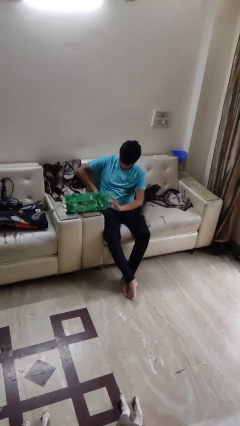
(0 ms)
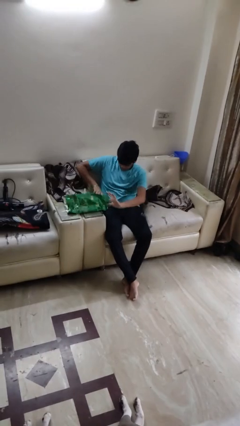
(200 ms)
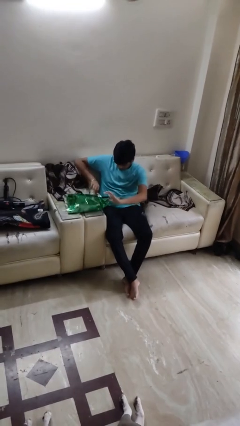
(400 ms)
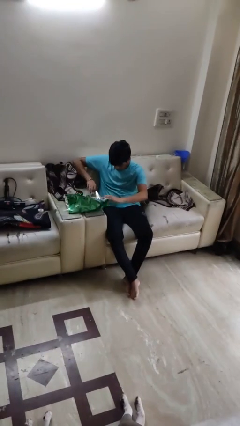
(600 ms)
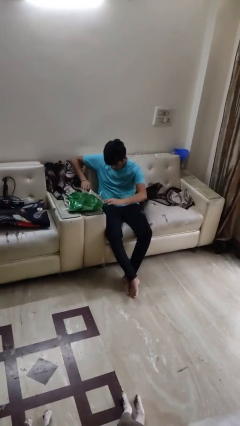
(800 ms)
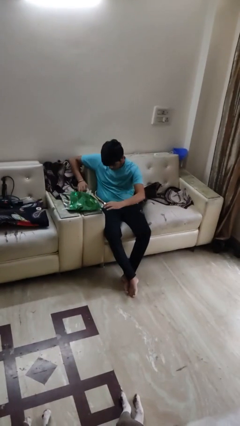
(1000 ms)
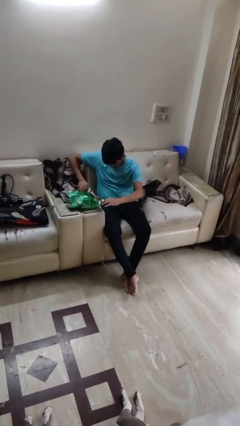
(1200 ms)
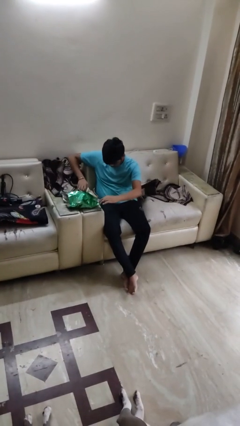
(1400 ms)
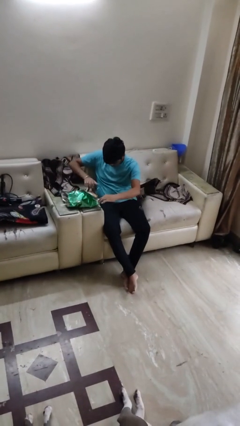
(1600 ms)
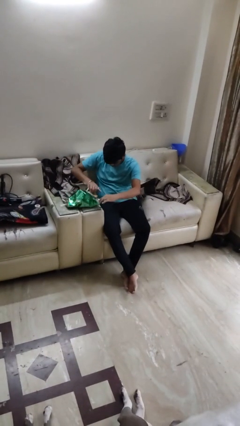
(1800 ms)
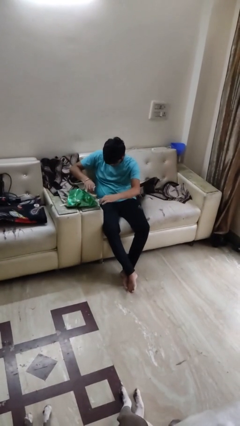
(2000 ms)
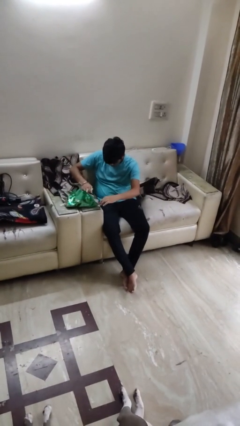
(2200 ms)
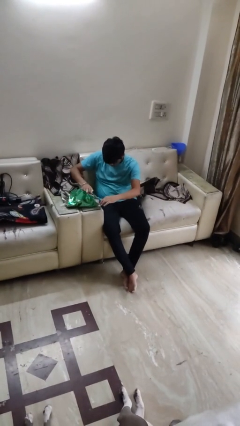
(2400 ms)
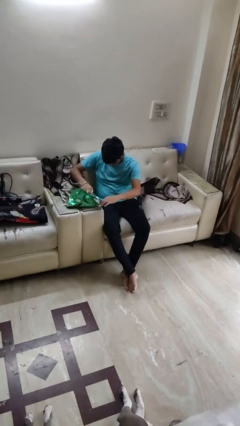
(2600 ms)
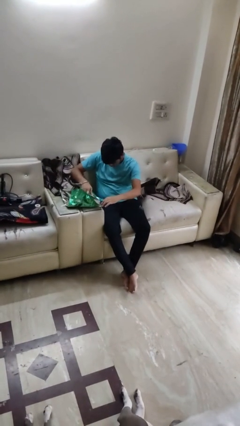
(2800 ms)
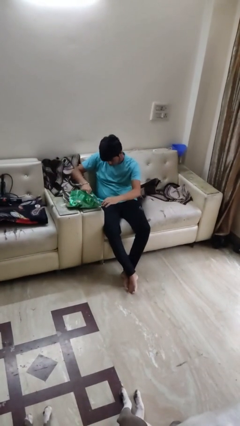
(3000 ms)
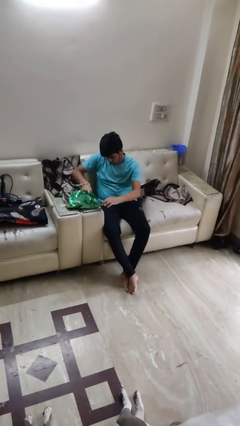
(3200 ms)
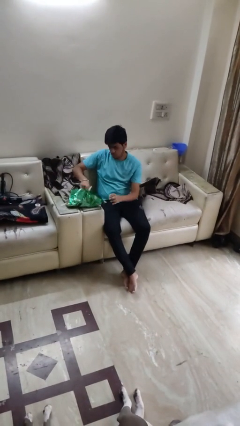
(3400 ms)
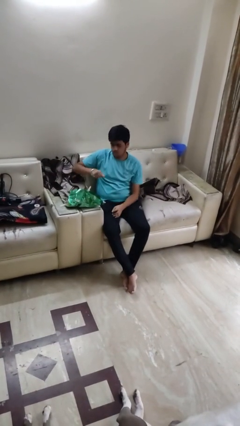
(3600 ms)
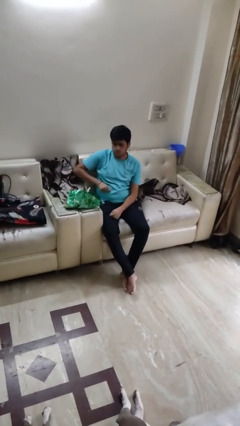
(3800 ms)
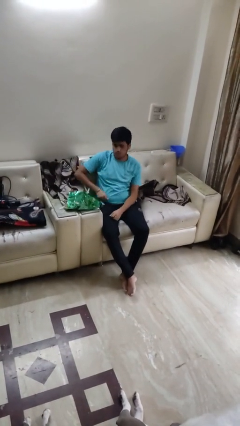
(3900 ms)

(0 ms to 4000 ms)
person wraps box

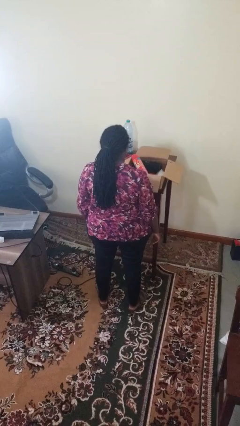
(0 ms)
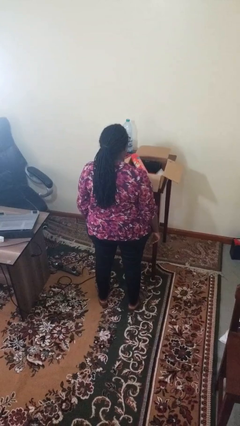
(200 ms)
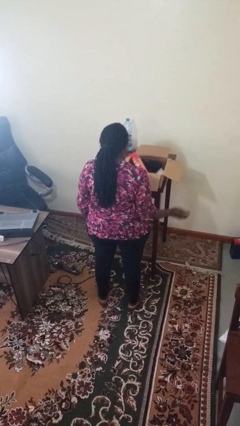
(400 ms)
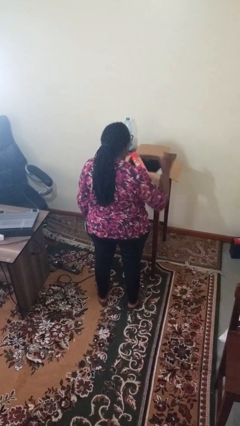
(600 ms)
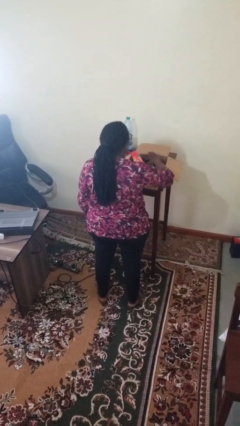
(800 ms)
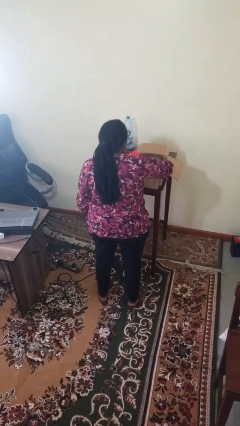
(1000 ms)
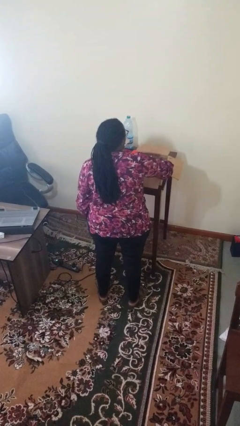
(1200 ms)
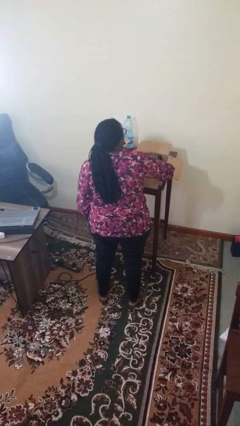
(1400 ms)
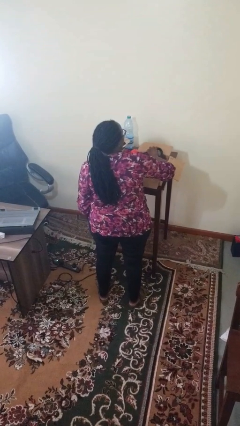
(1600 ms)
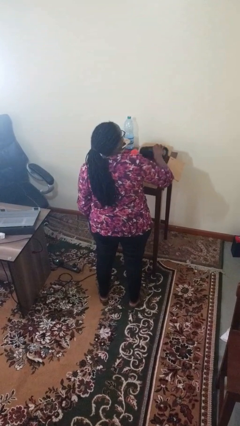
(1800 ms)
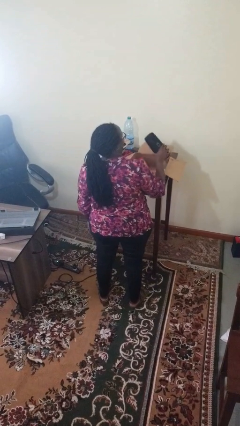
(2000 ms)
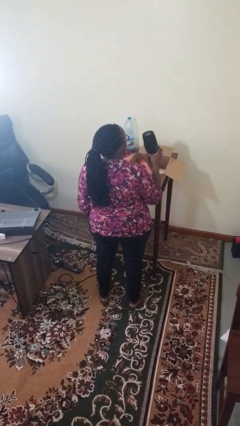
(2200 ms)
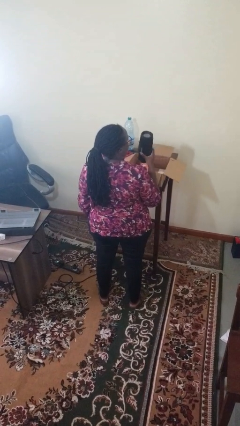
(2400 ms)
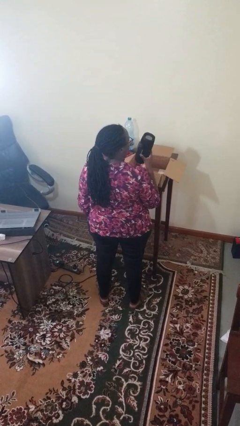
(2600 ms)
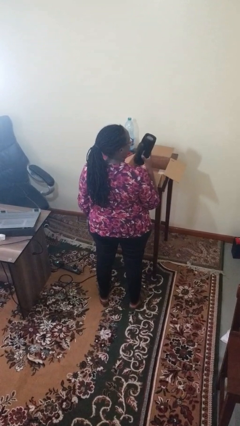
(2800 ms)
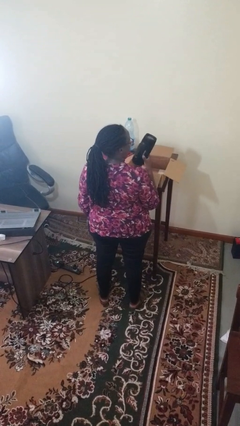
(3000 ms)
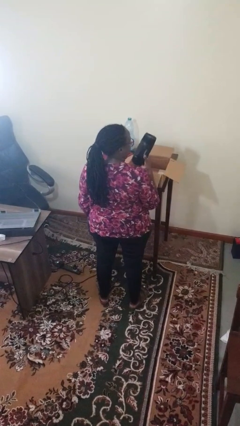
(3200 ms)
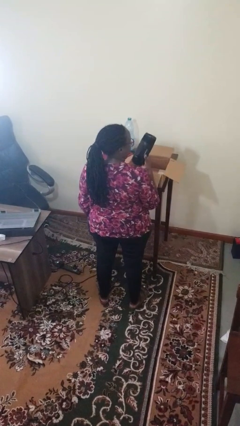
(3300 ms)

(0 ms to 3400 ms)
person takes object from box

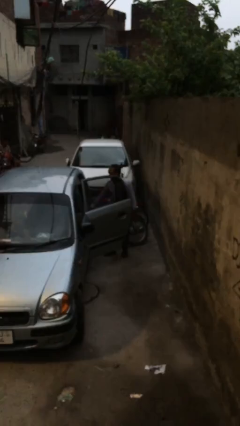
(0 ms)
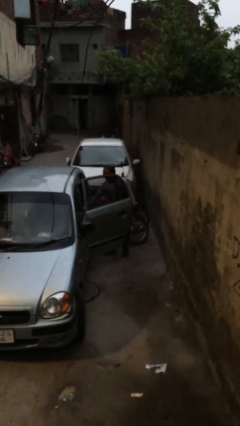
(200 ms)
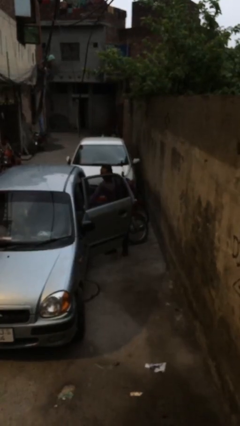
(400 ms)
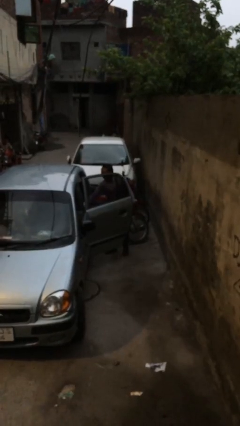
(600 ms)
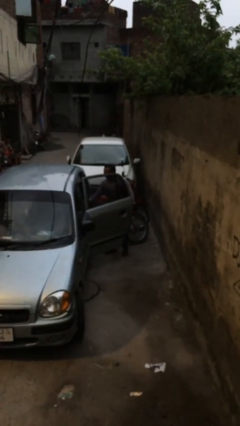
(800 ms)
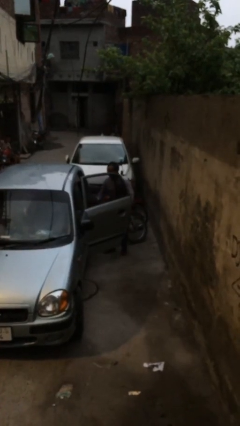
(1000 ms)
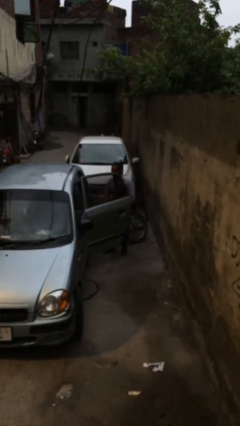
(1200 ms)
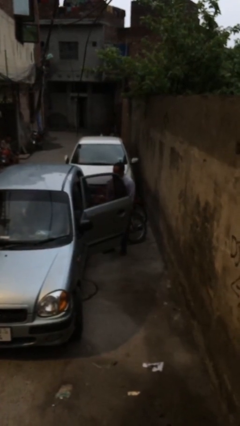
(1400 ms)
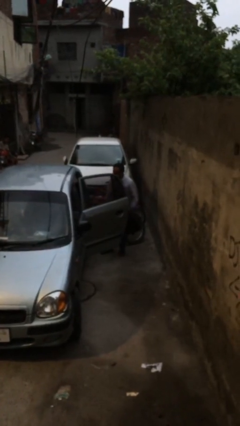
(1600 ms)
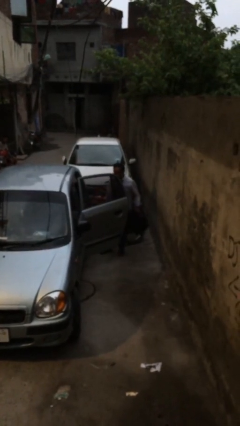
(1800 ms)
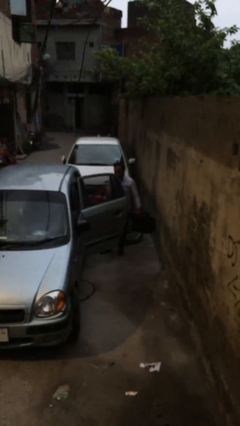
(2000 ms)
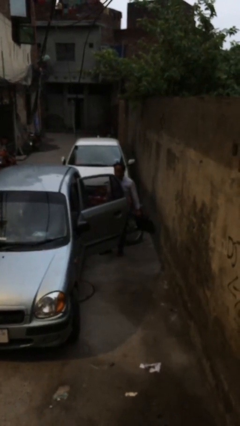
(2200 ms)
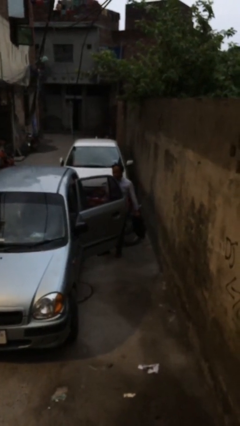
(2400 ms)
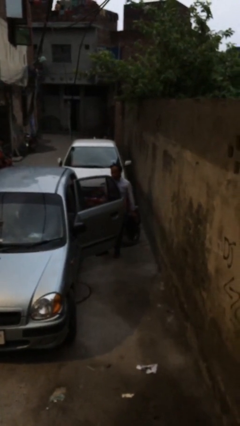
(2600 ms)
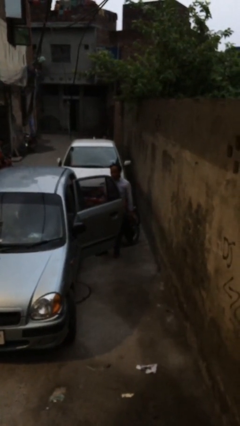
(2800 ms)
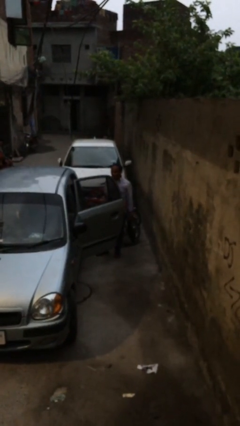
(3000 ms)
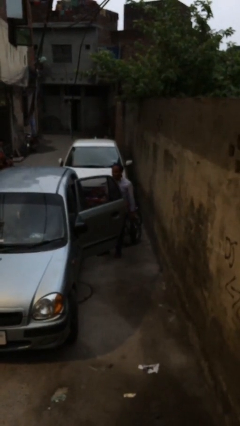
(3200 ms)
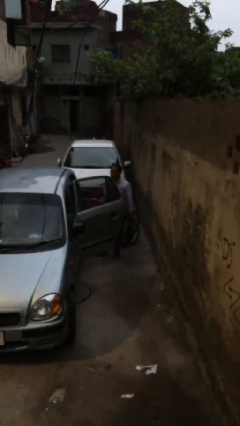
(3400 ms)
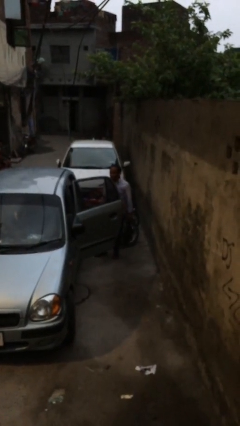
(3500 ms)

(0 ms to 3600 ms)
person unloads car

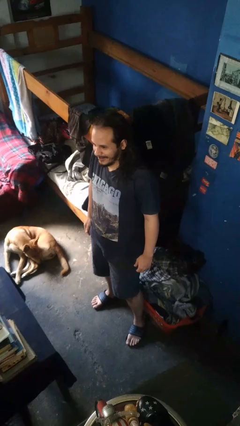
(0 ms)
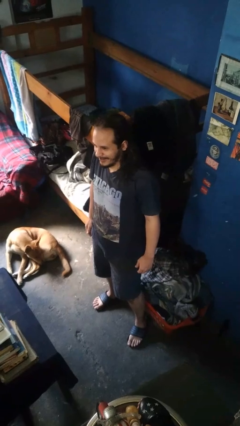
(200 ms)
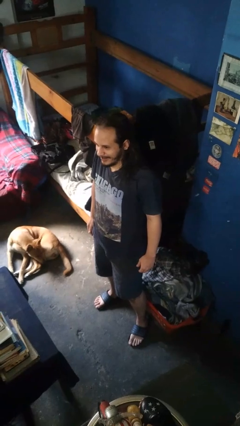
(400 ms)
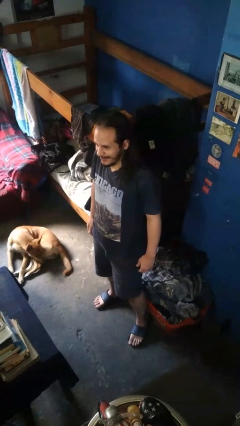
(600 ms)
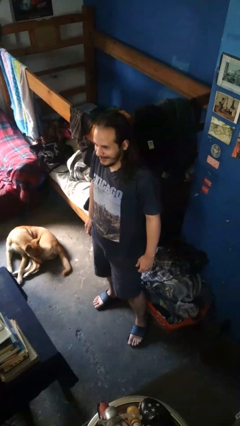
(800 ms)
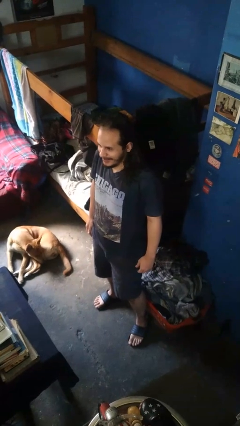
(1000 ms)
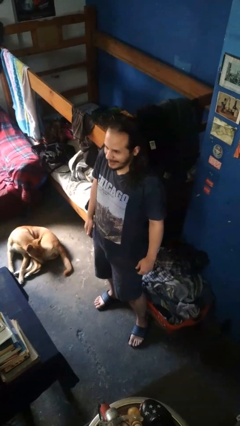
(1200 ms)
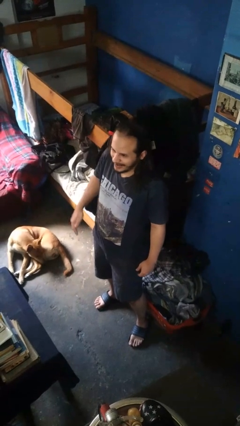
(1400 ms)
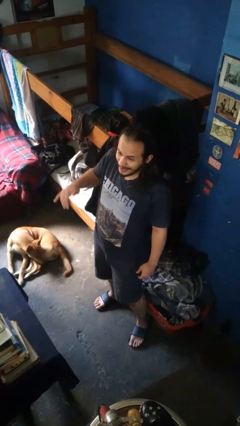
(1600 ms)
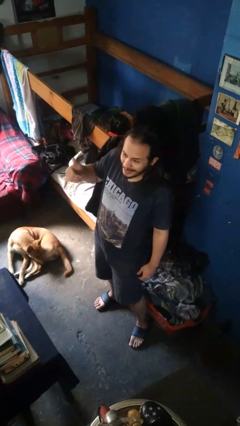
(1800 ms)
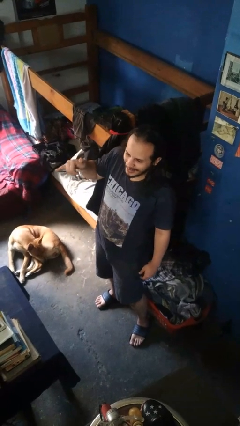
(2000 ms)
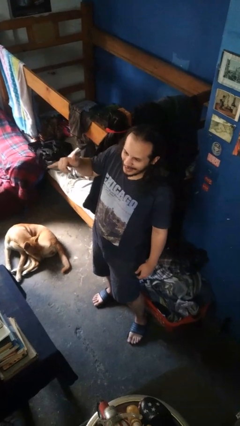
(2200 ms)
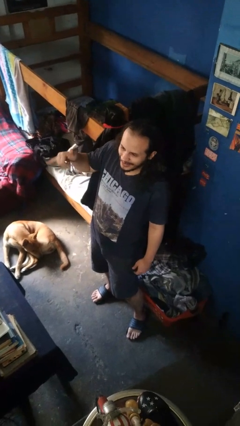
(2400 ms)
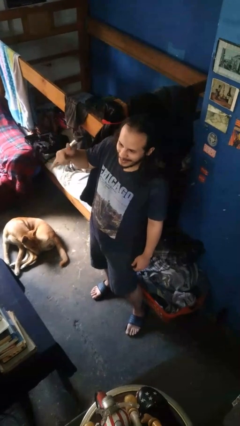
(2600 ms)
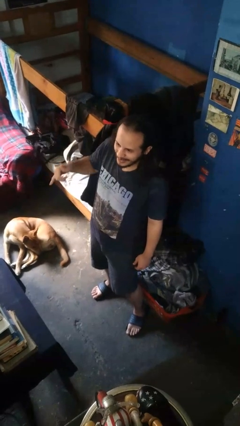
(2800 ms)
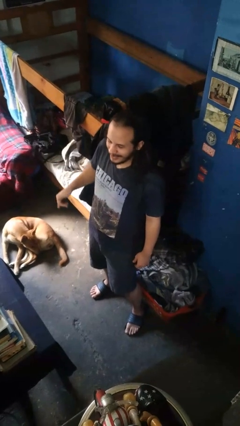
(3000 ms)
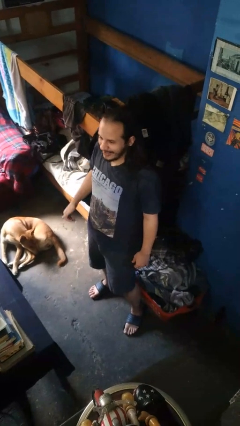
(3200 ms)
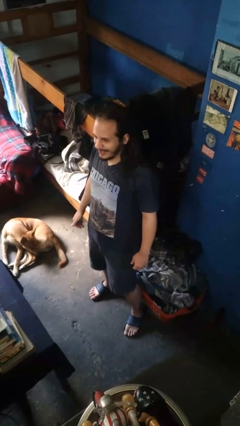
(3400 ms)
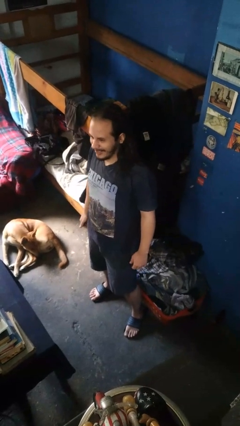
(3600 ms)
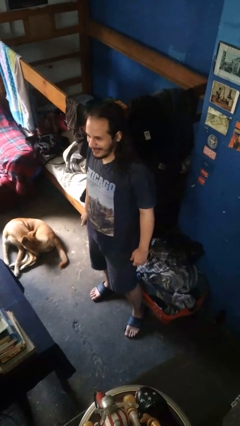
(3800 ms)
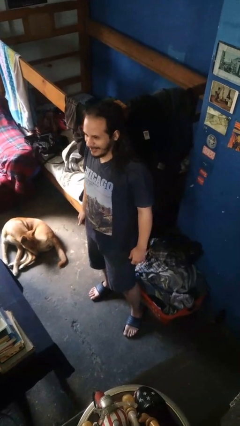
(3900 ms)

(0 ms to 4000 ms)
person gestures hang loose

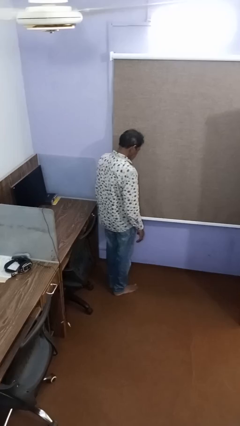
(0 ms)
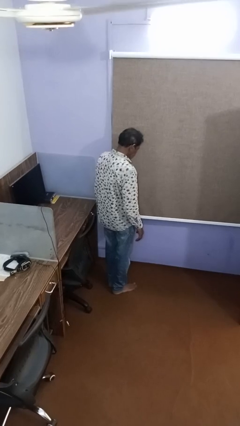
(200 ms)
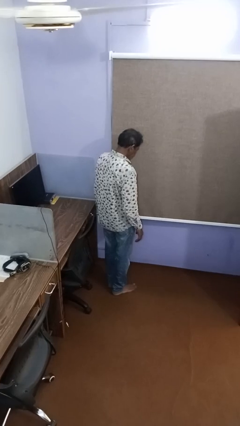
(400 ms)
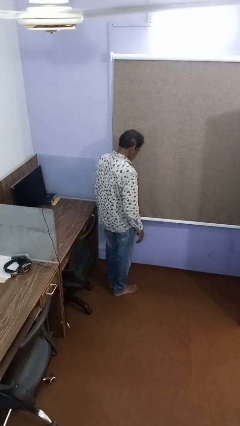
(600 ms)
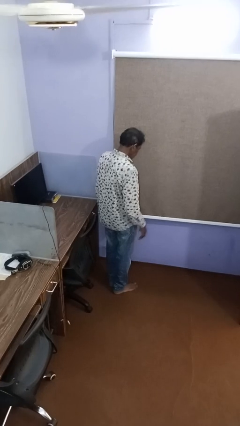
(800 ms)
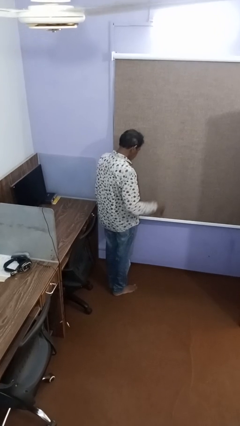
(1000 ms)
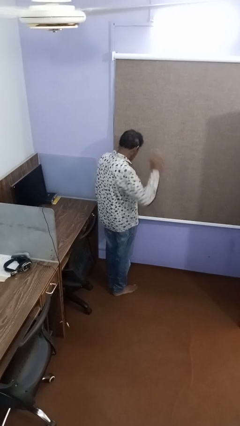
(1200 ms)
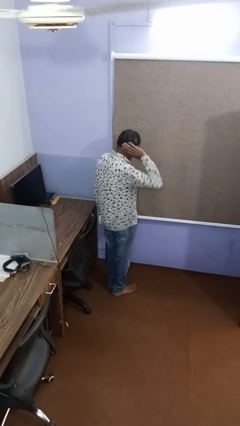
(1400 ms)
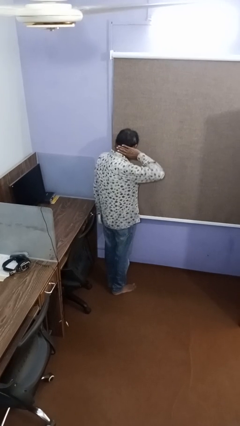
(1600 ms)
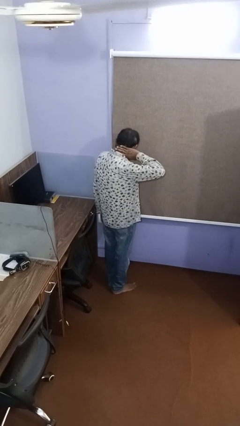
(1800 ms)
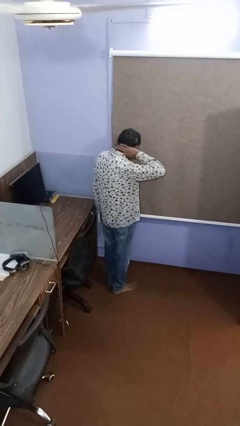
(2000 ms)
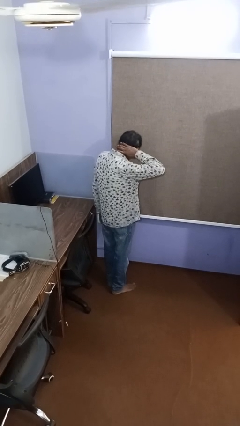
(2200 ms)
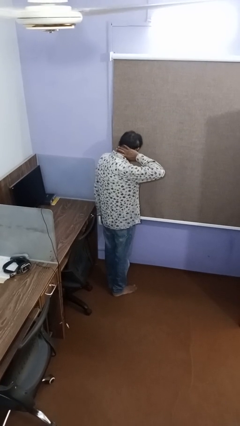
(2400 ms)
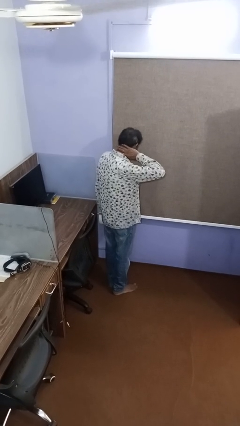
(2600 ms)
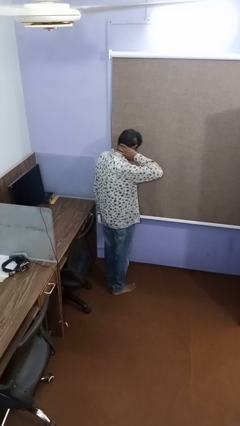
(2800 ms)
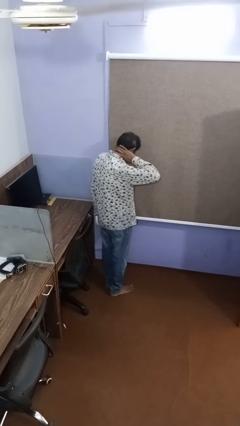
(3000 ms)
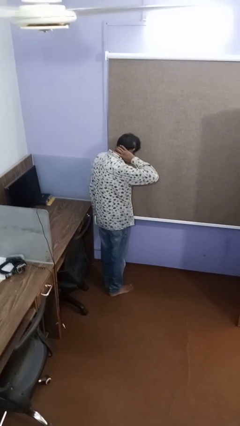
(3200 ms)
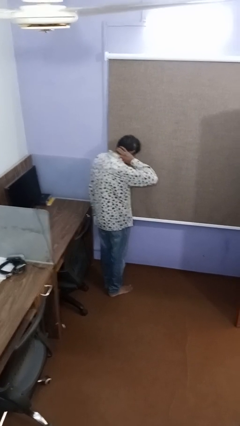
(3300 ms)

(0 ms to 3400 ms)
person cracks knuckles
